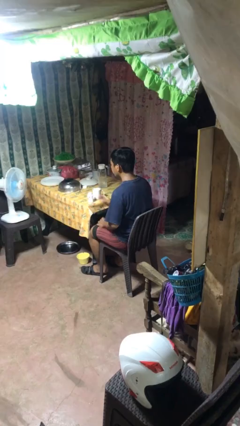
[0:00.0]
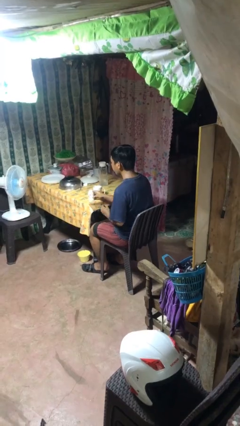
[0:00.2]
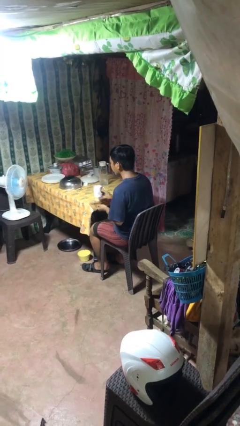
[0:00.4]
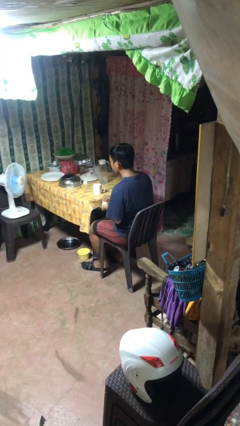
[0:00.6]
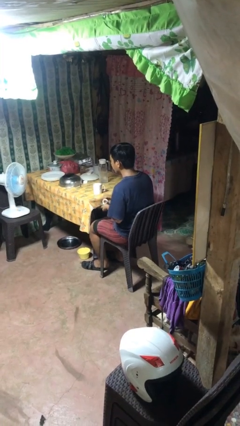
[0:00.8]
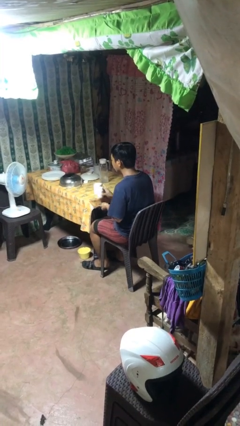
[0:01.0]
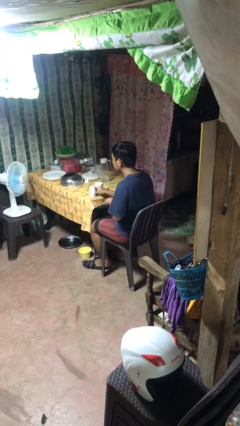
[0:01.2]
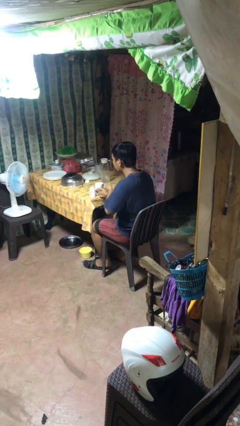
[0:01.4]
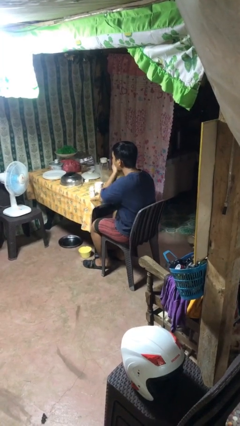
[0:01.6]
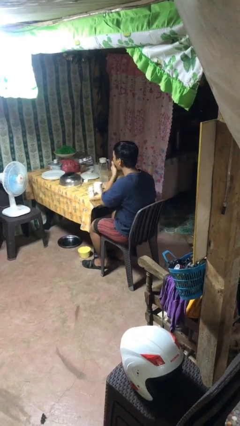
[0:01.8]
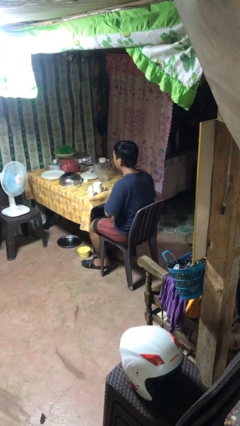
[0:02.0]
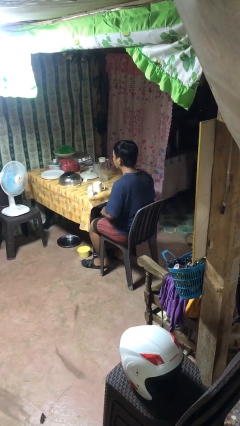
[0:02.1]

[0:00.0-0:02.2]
person takes medicine pills

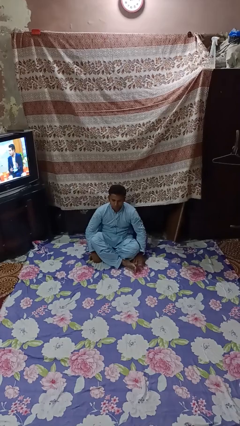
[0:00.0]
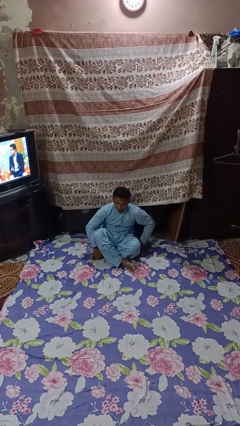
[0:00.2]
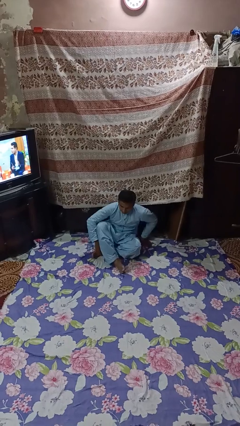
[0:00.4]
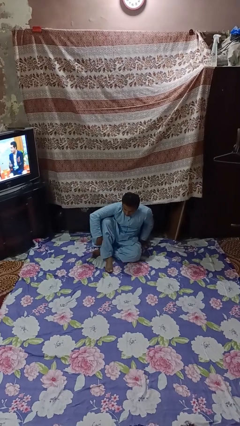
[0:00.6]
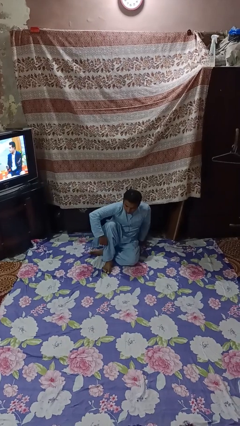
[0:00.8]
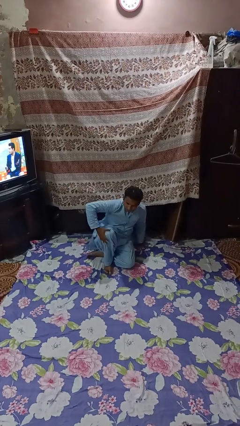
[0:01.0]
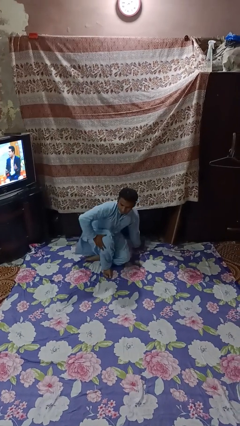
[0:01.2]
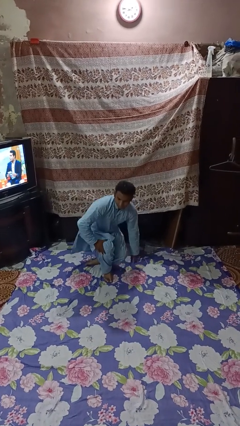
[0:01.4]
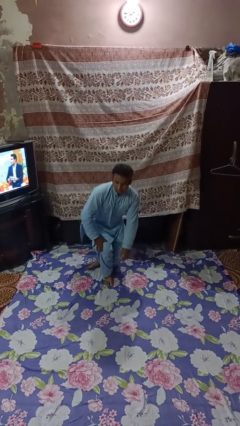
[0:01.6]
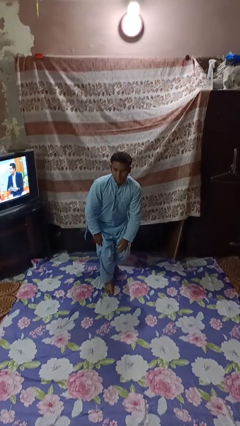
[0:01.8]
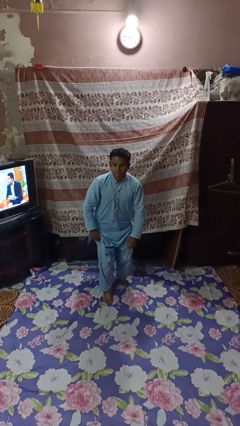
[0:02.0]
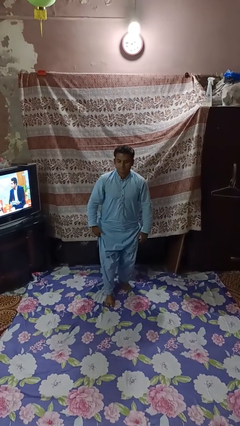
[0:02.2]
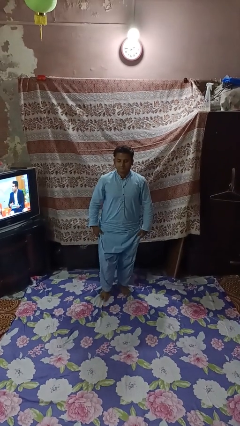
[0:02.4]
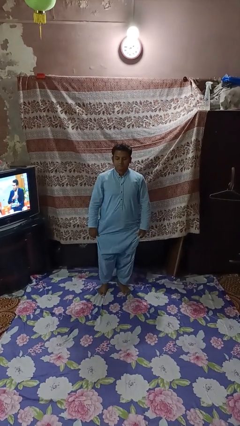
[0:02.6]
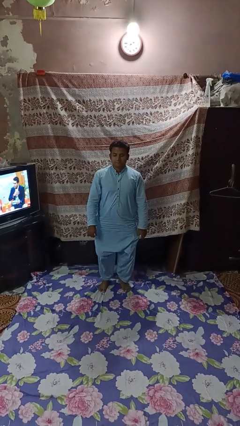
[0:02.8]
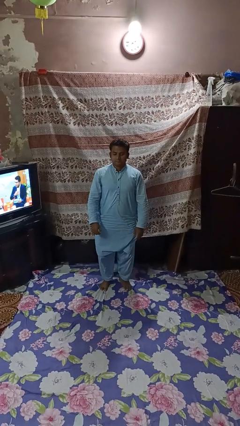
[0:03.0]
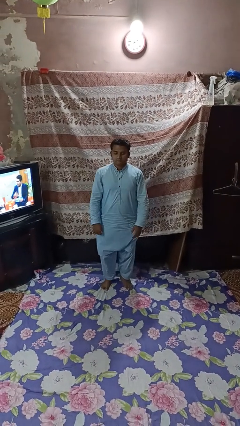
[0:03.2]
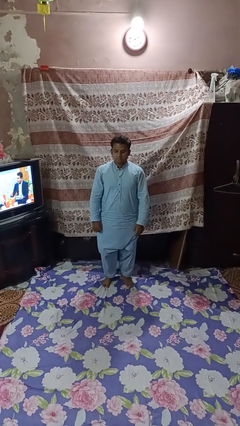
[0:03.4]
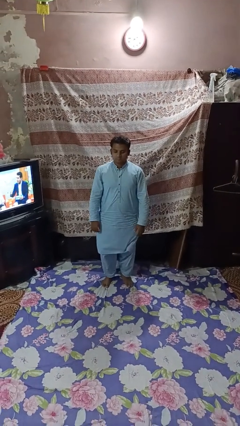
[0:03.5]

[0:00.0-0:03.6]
person stands up from floor

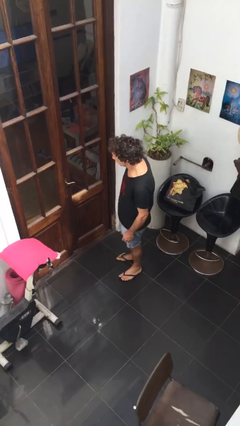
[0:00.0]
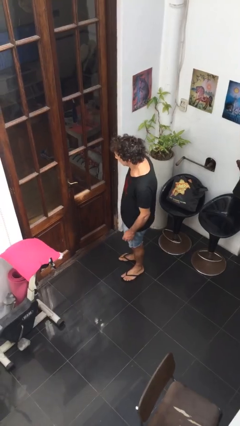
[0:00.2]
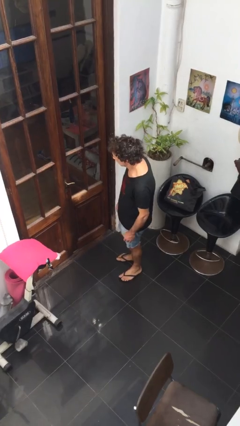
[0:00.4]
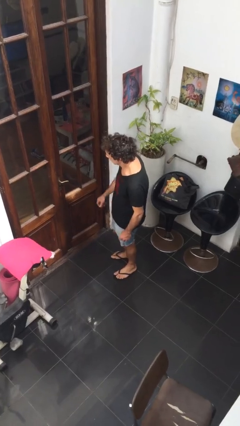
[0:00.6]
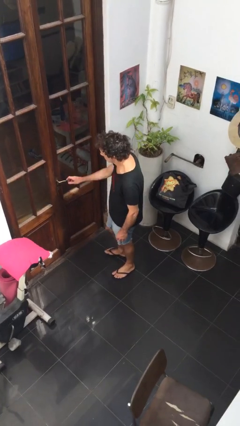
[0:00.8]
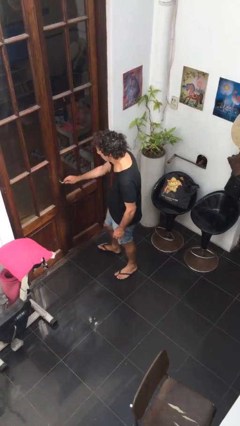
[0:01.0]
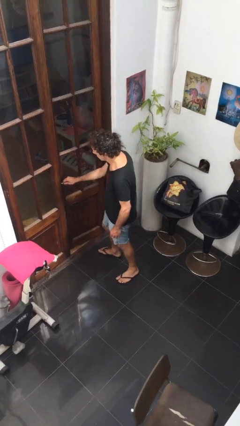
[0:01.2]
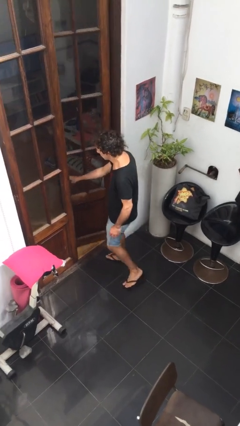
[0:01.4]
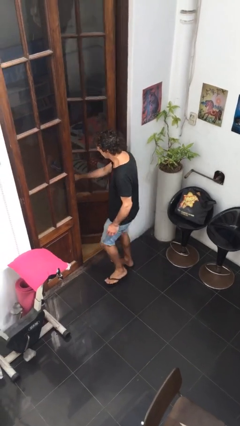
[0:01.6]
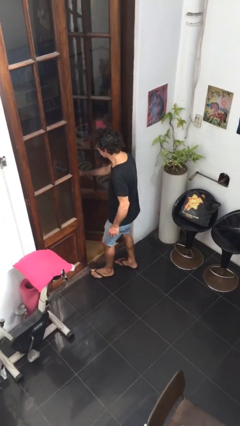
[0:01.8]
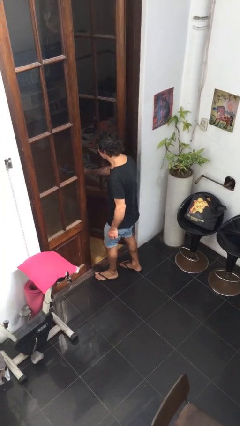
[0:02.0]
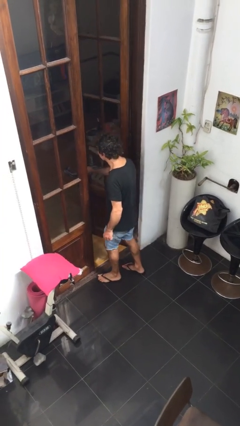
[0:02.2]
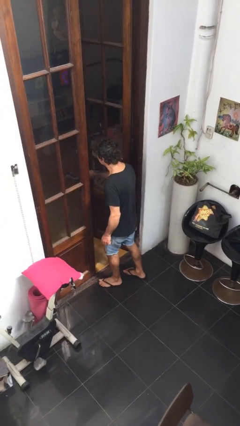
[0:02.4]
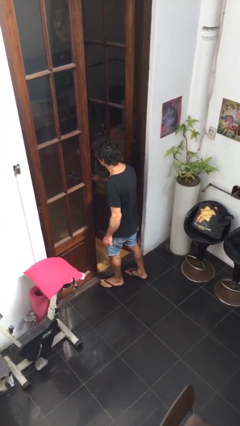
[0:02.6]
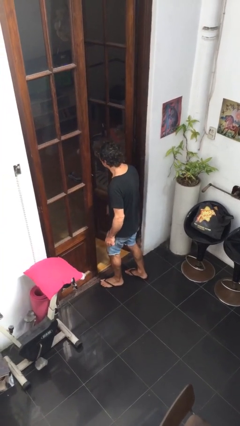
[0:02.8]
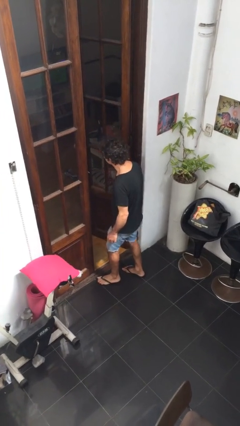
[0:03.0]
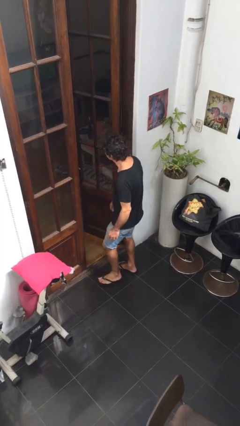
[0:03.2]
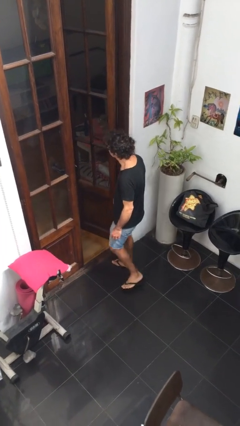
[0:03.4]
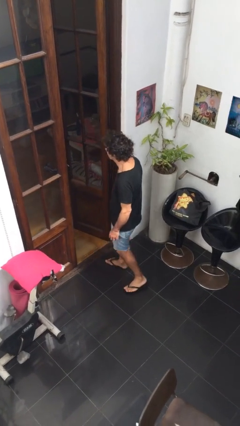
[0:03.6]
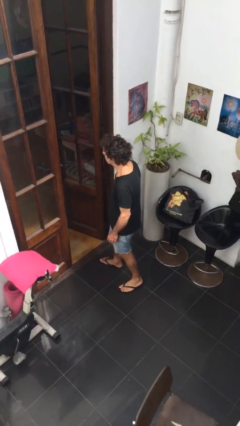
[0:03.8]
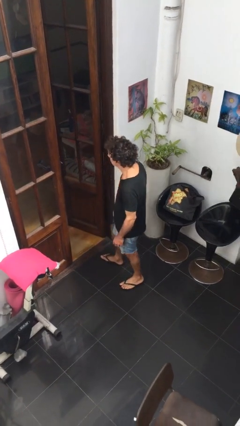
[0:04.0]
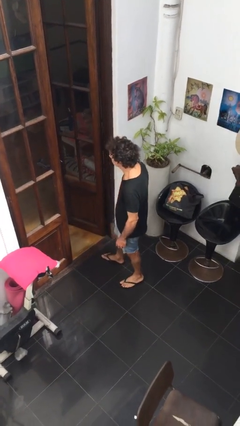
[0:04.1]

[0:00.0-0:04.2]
person opens facility door

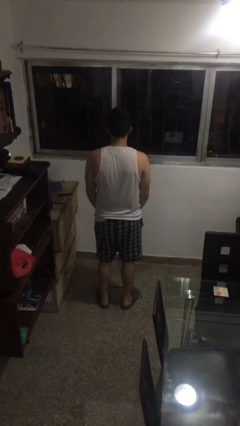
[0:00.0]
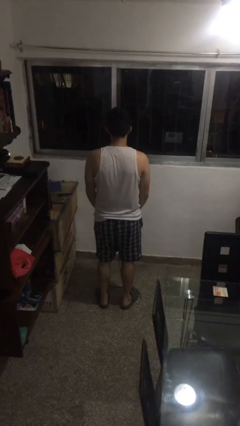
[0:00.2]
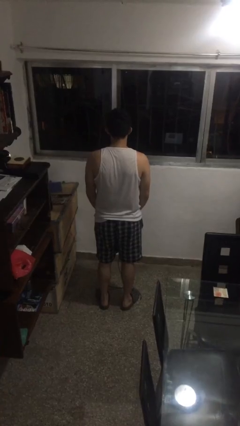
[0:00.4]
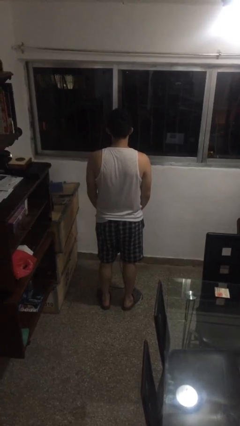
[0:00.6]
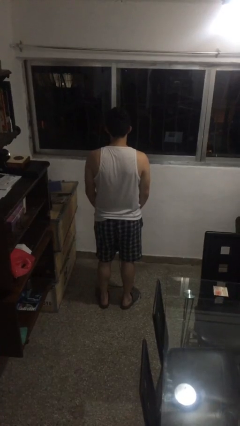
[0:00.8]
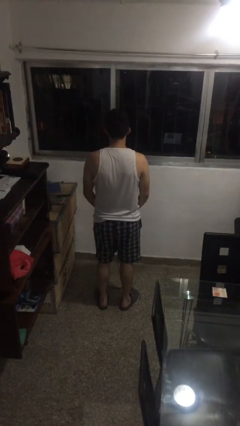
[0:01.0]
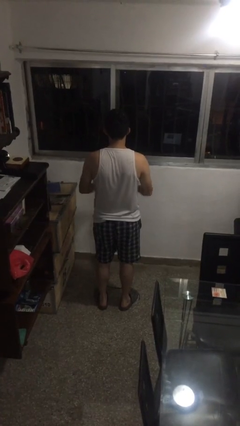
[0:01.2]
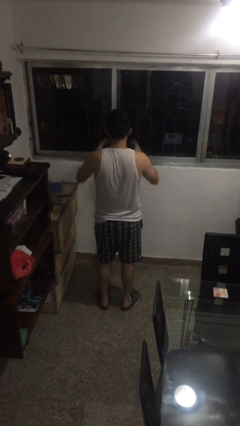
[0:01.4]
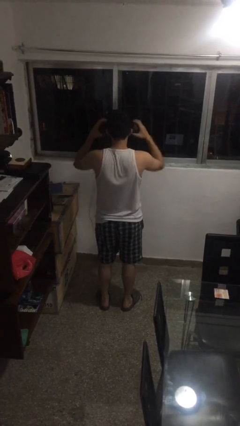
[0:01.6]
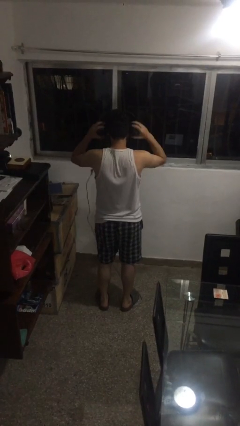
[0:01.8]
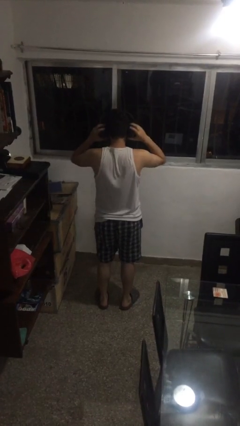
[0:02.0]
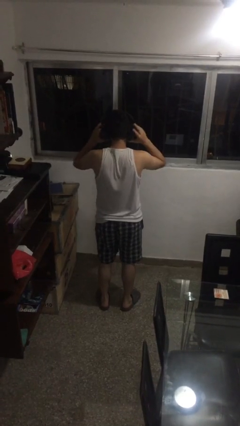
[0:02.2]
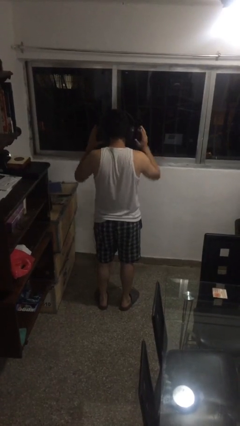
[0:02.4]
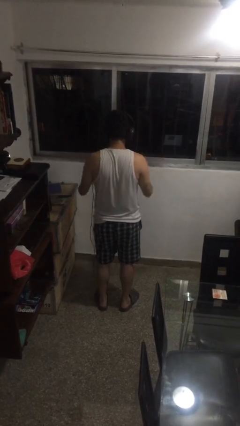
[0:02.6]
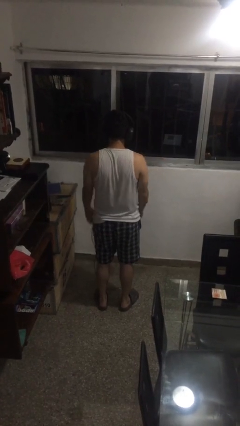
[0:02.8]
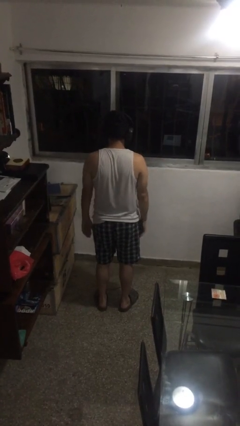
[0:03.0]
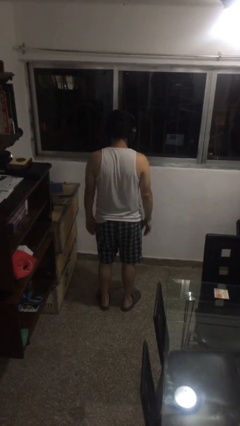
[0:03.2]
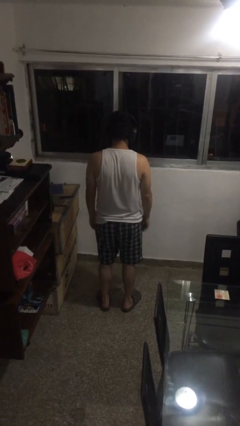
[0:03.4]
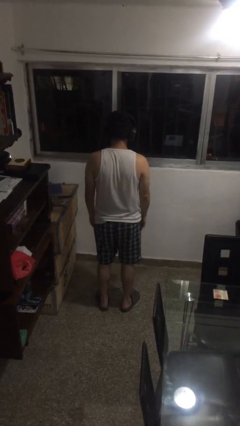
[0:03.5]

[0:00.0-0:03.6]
person puts on headphones

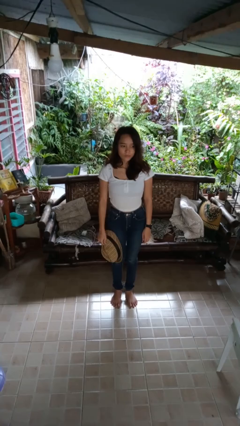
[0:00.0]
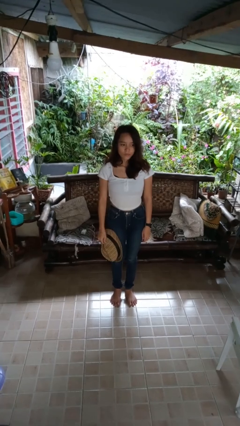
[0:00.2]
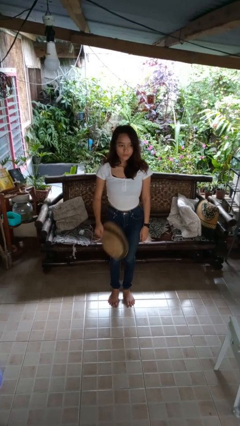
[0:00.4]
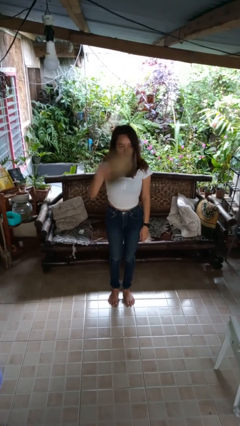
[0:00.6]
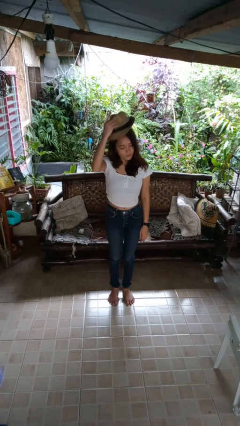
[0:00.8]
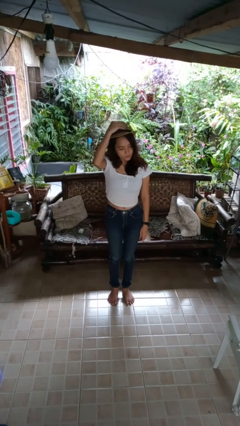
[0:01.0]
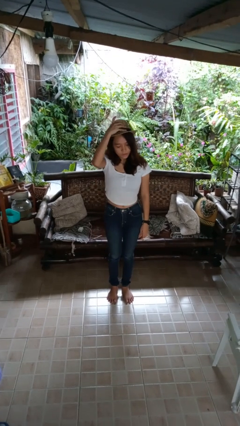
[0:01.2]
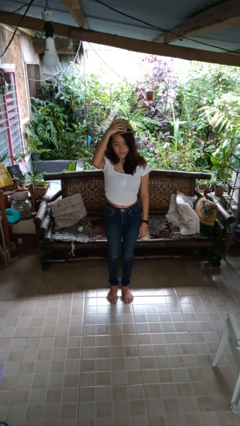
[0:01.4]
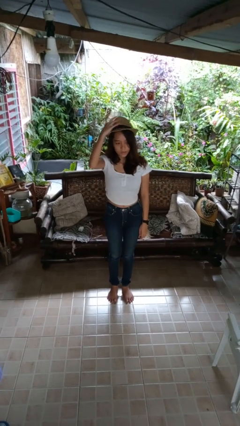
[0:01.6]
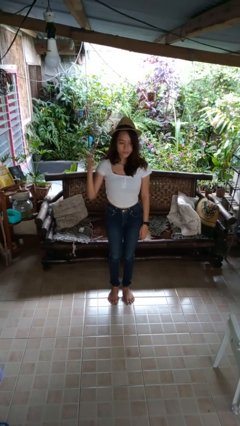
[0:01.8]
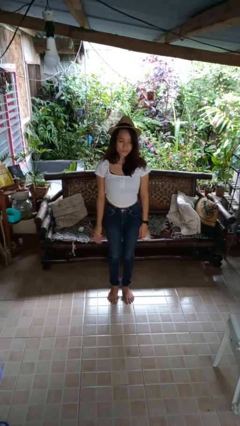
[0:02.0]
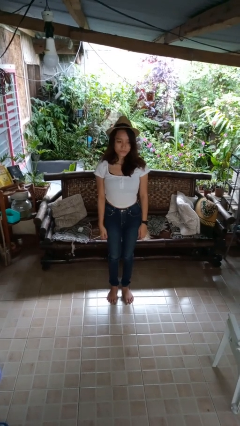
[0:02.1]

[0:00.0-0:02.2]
person puts on hat

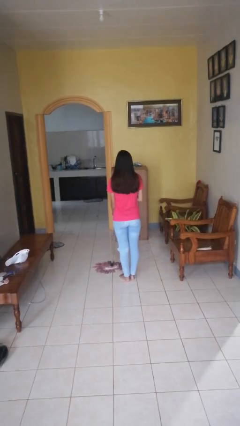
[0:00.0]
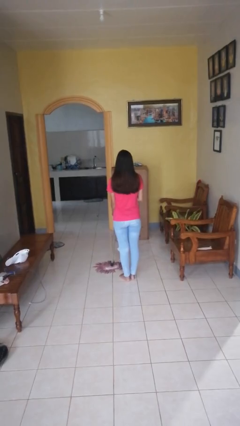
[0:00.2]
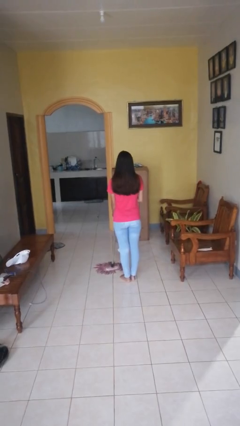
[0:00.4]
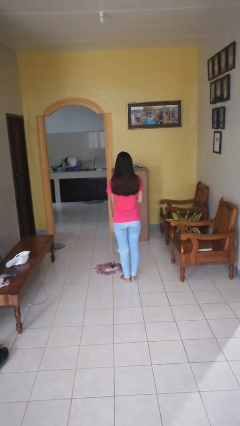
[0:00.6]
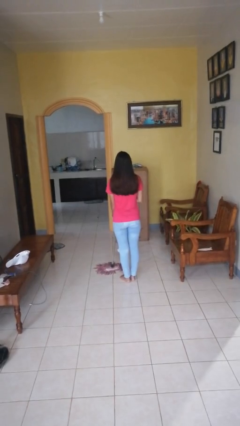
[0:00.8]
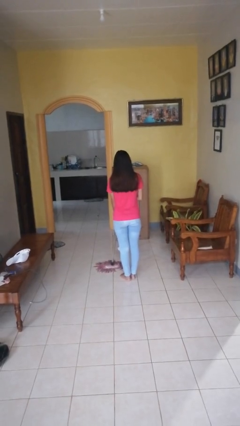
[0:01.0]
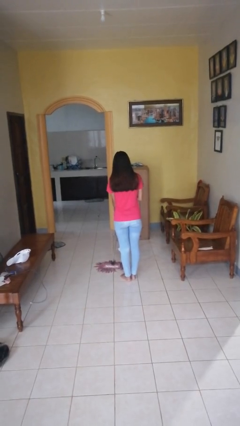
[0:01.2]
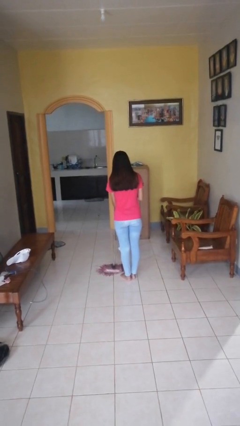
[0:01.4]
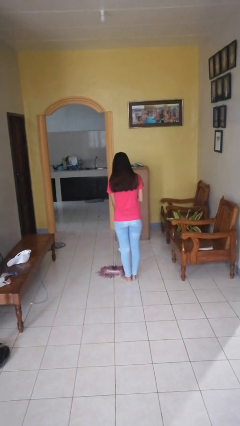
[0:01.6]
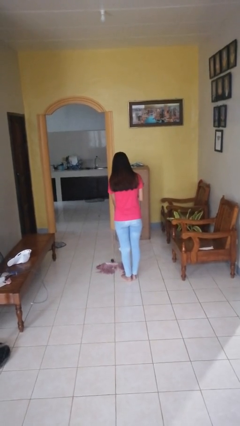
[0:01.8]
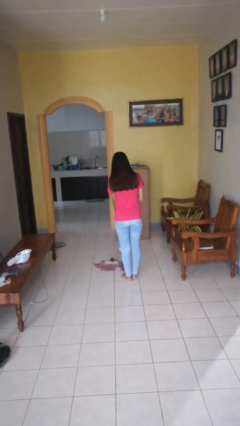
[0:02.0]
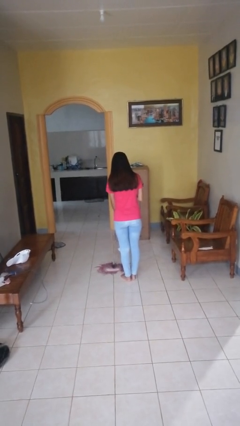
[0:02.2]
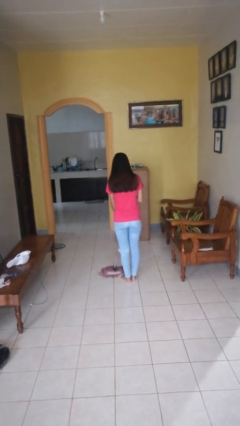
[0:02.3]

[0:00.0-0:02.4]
person mops
